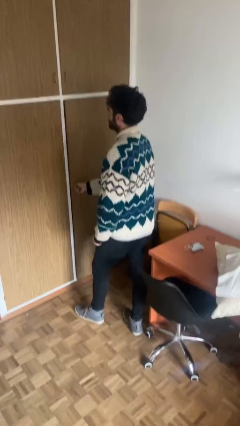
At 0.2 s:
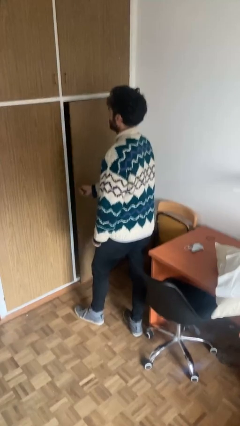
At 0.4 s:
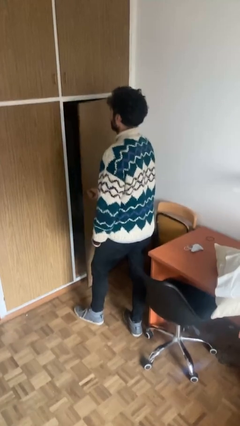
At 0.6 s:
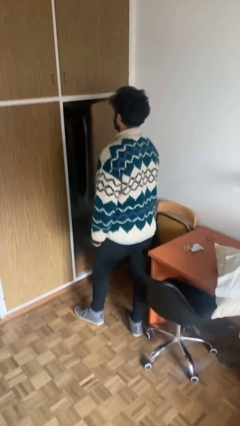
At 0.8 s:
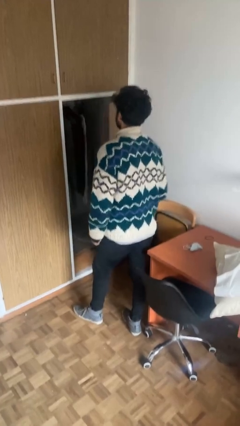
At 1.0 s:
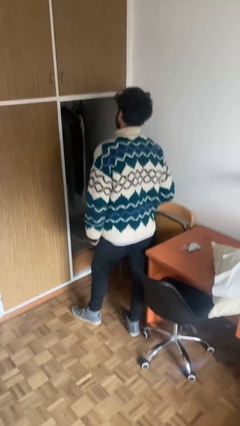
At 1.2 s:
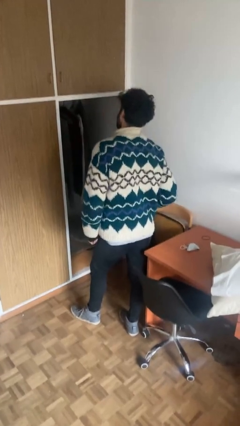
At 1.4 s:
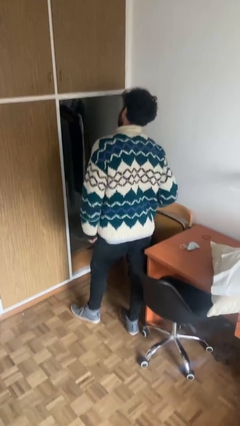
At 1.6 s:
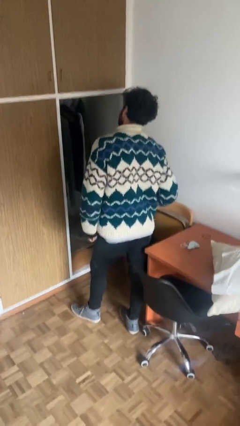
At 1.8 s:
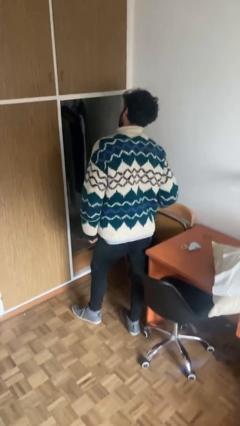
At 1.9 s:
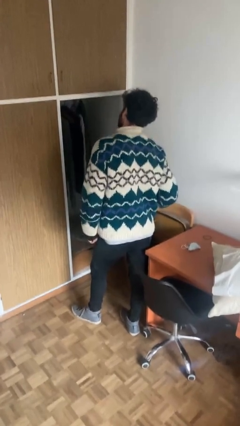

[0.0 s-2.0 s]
person opens closet door

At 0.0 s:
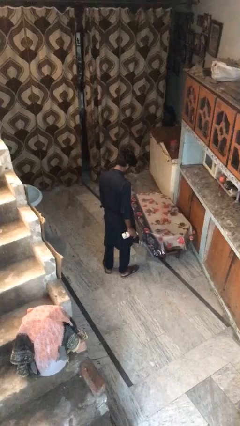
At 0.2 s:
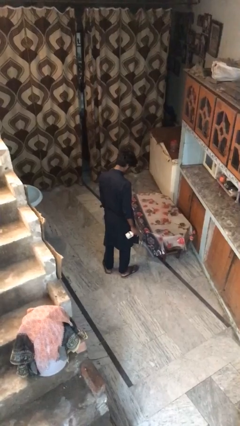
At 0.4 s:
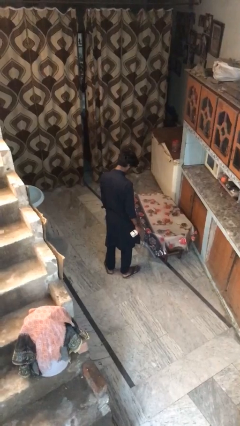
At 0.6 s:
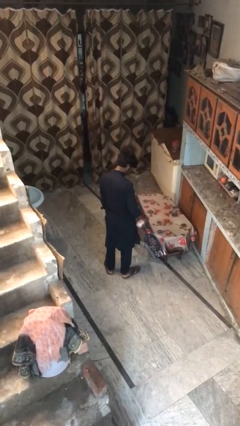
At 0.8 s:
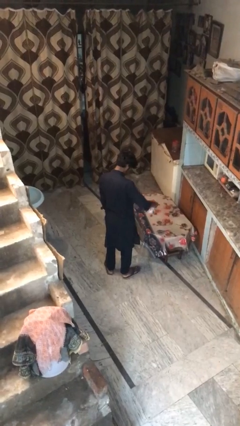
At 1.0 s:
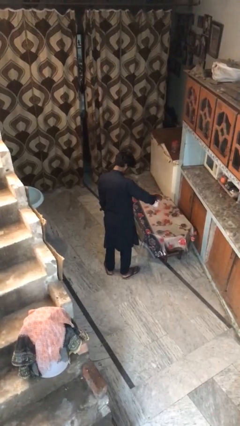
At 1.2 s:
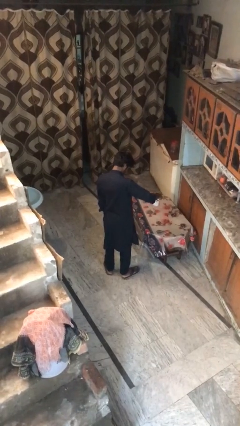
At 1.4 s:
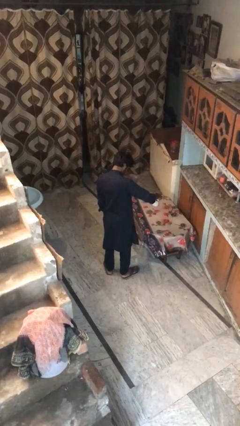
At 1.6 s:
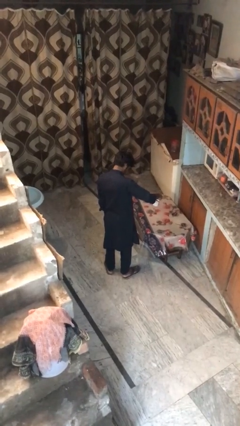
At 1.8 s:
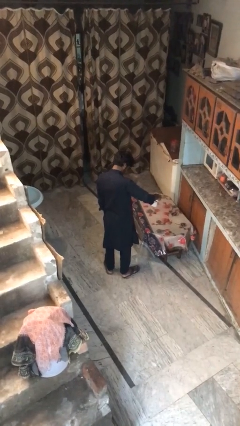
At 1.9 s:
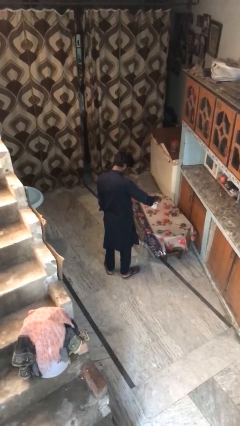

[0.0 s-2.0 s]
person sprays from bottle

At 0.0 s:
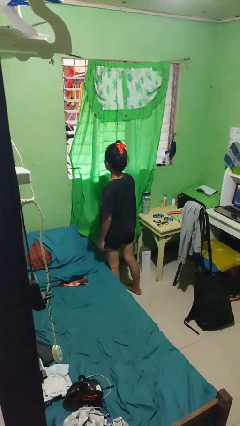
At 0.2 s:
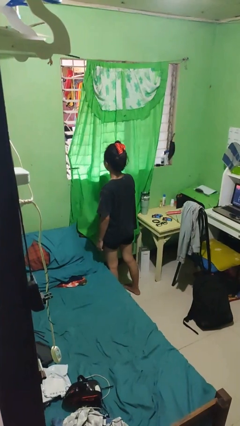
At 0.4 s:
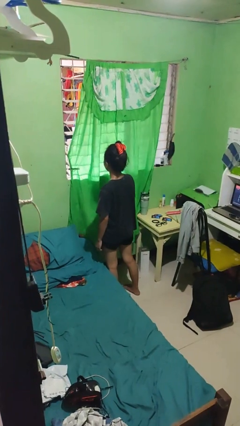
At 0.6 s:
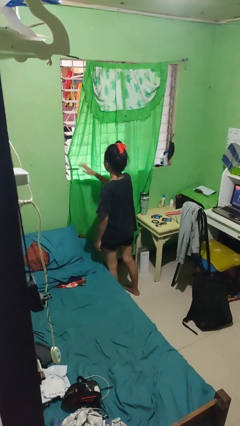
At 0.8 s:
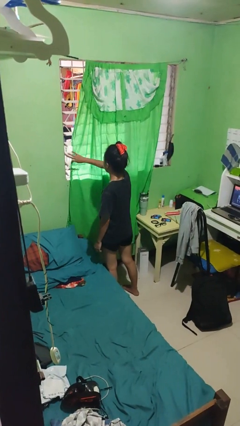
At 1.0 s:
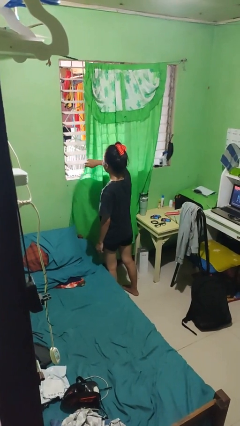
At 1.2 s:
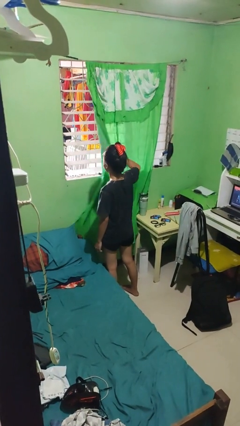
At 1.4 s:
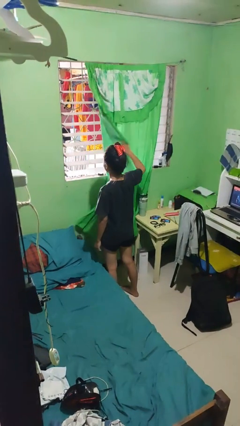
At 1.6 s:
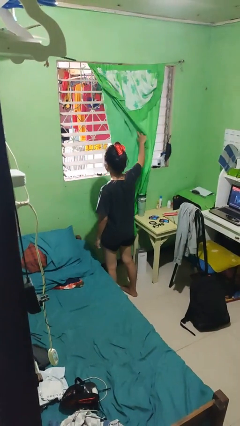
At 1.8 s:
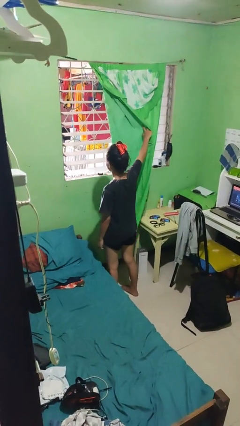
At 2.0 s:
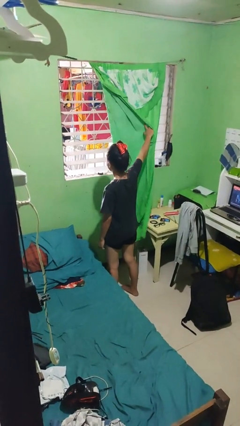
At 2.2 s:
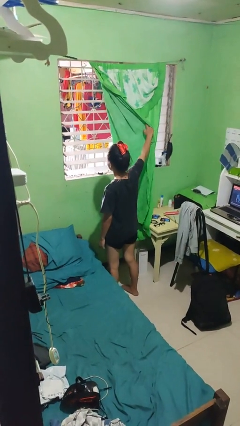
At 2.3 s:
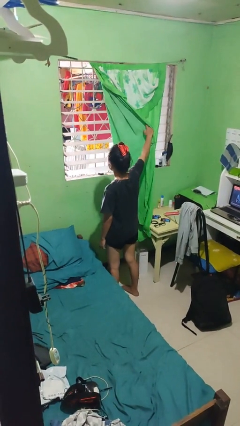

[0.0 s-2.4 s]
person opens curtains

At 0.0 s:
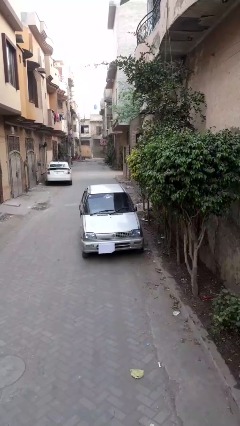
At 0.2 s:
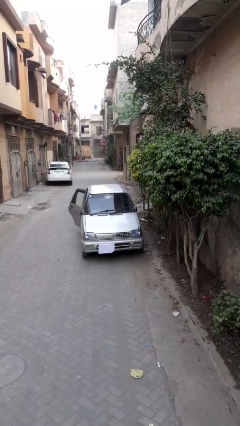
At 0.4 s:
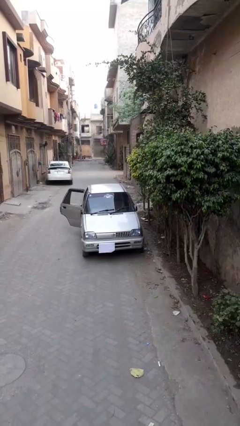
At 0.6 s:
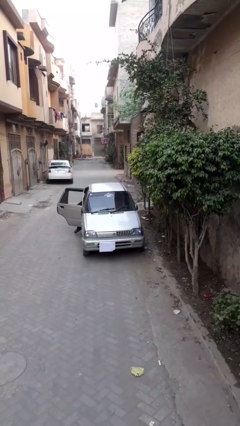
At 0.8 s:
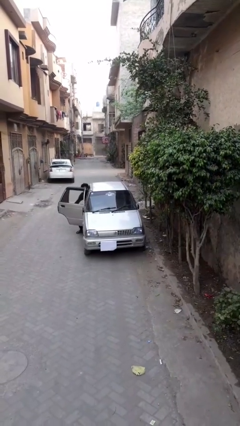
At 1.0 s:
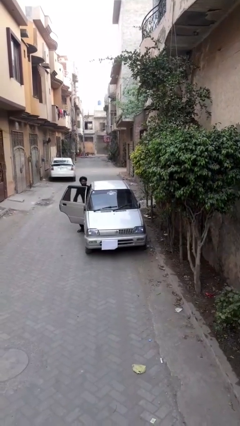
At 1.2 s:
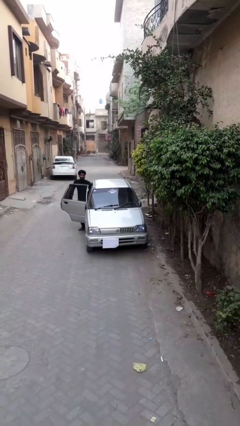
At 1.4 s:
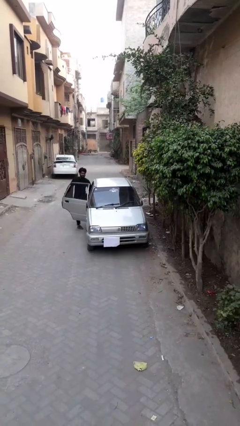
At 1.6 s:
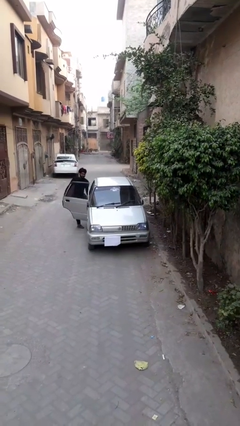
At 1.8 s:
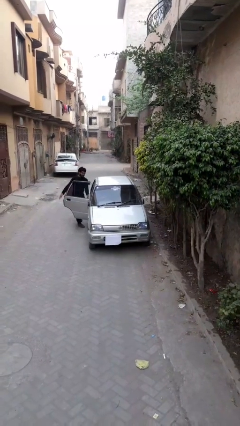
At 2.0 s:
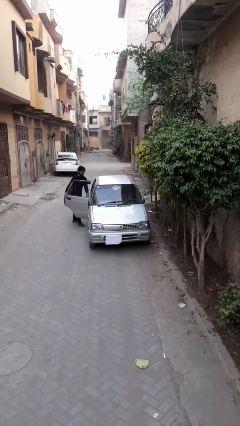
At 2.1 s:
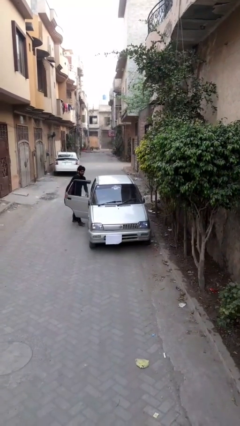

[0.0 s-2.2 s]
car drops off person

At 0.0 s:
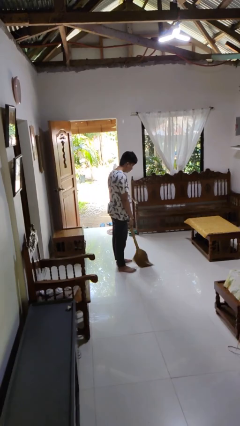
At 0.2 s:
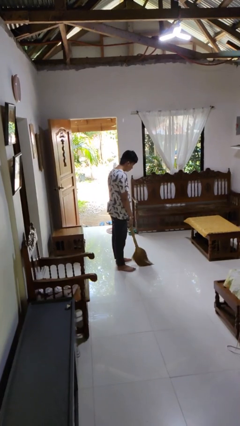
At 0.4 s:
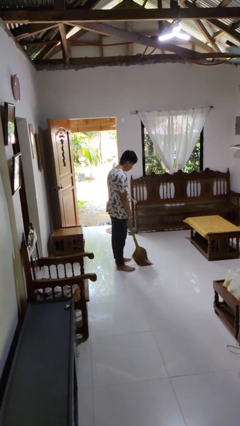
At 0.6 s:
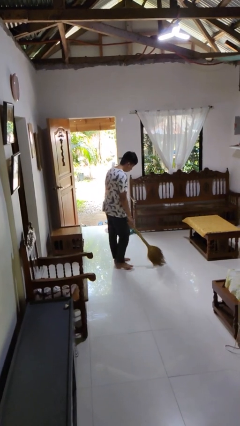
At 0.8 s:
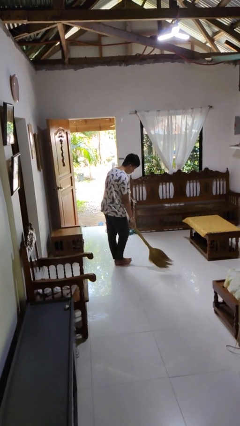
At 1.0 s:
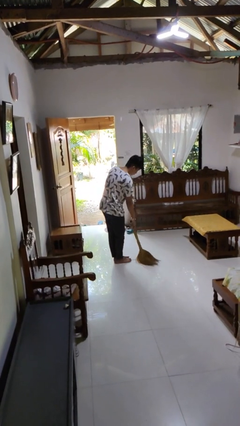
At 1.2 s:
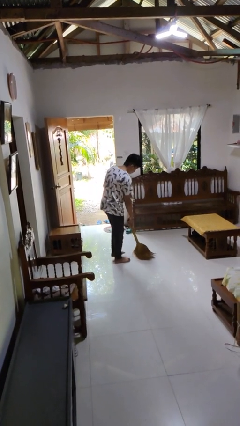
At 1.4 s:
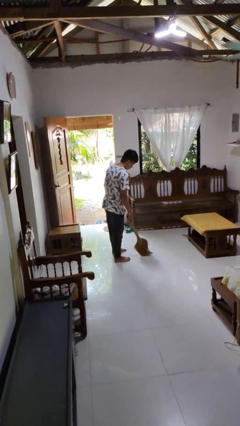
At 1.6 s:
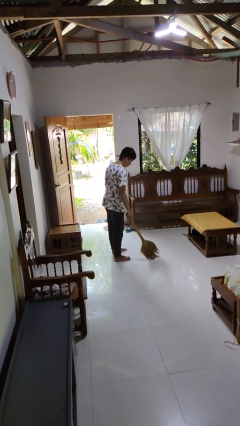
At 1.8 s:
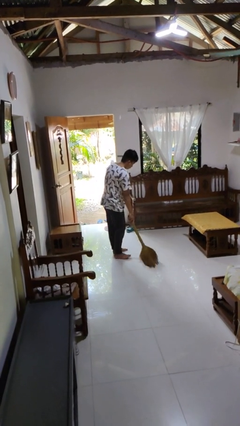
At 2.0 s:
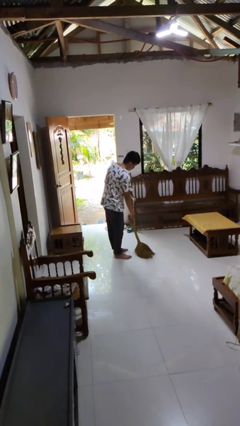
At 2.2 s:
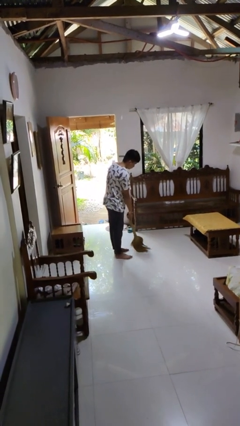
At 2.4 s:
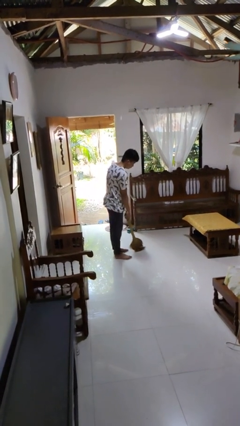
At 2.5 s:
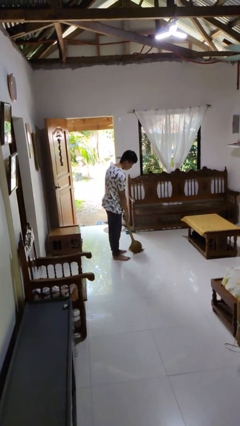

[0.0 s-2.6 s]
person sweeps floor

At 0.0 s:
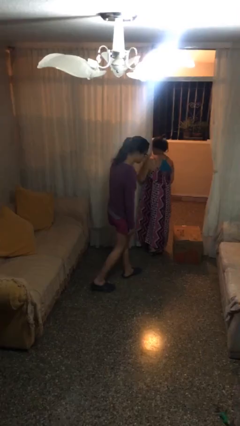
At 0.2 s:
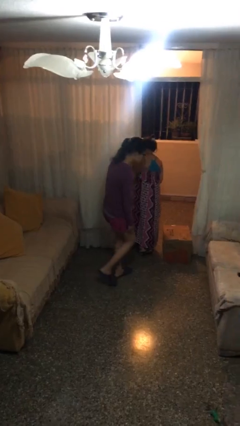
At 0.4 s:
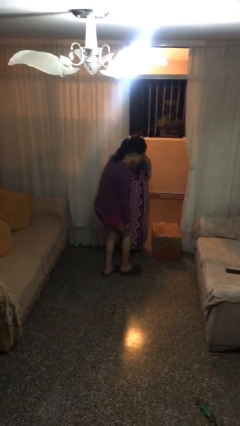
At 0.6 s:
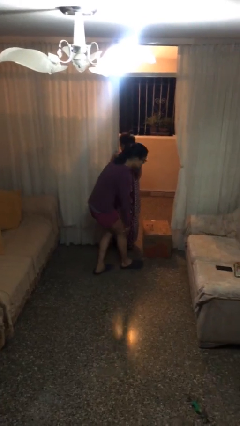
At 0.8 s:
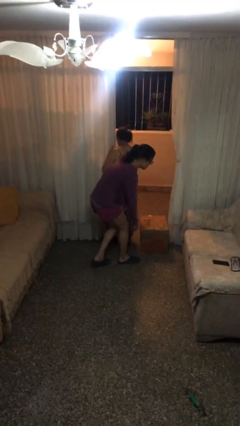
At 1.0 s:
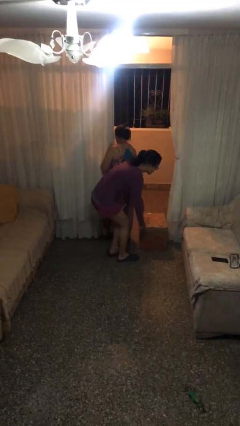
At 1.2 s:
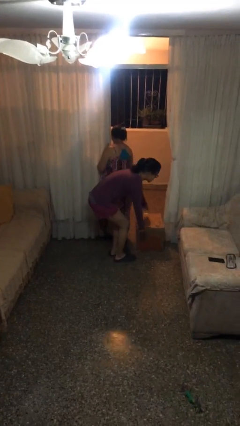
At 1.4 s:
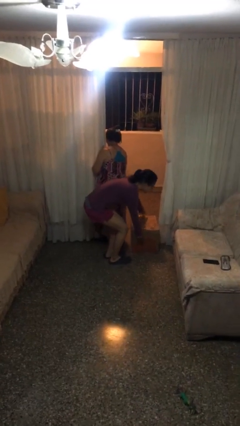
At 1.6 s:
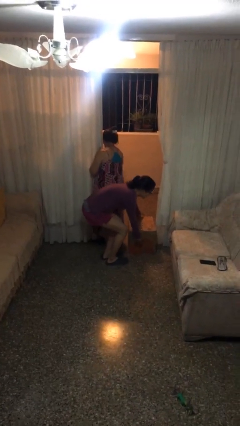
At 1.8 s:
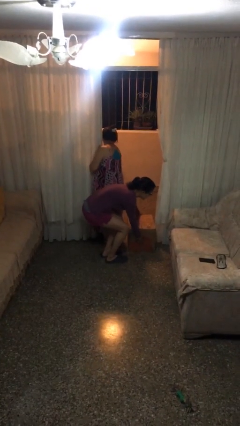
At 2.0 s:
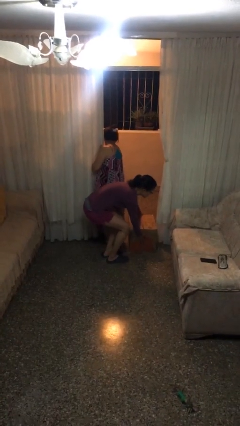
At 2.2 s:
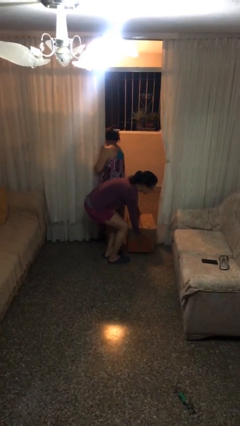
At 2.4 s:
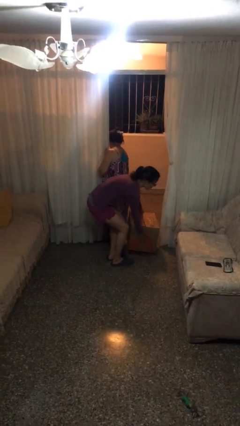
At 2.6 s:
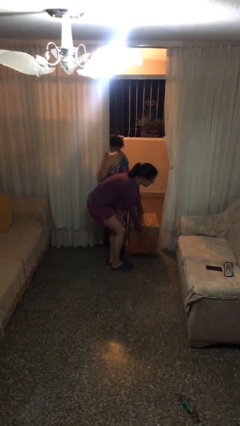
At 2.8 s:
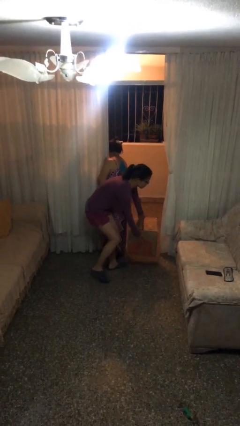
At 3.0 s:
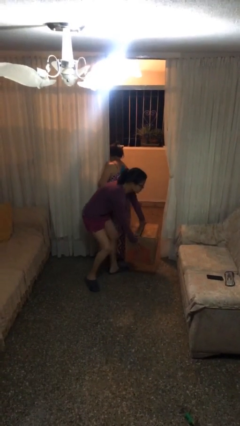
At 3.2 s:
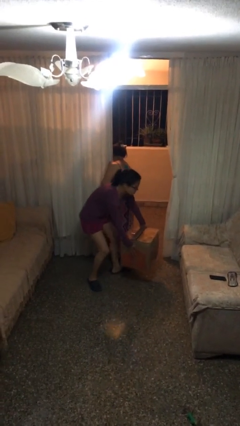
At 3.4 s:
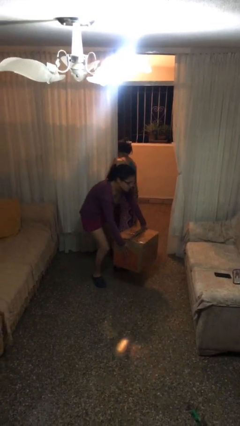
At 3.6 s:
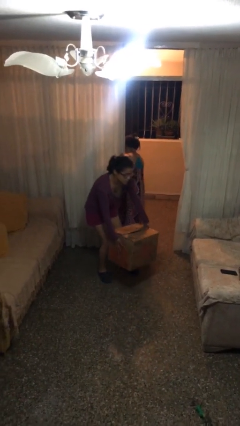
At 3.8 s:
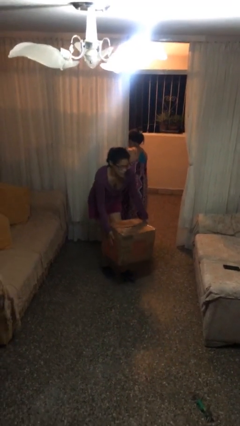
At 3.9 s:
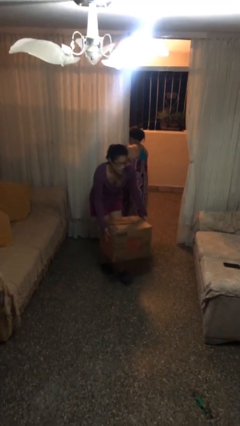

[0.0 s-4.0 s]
person steals object from person

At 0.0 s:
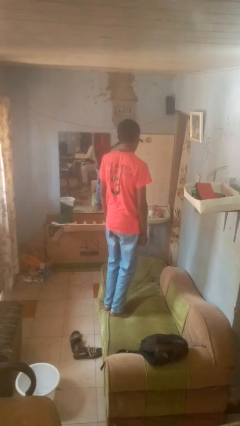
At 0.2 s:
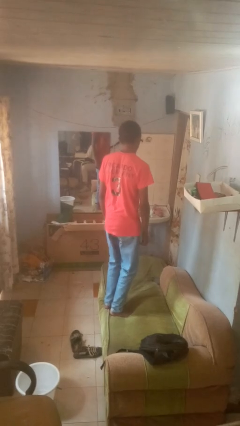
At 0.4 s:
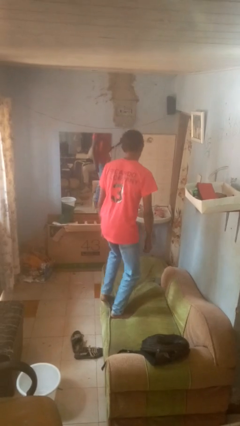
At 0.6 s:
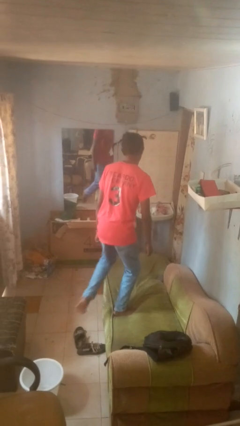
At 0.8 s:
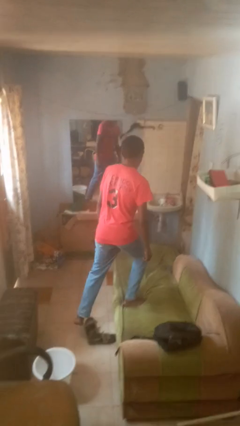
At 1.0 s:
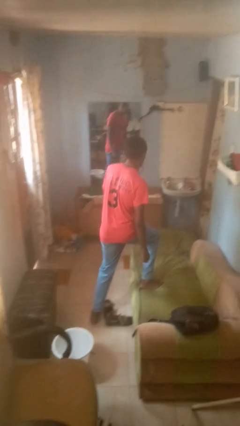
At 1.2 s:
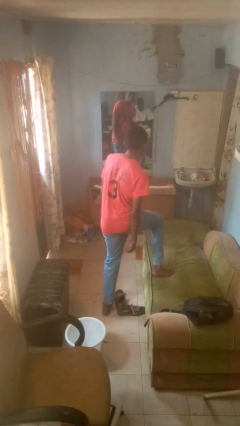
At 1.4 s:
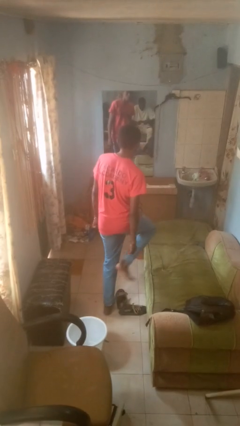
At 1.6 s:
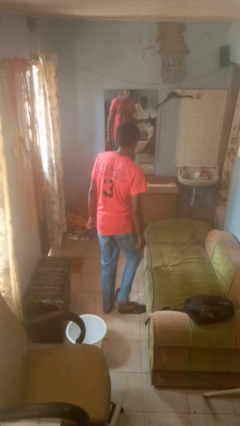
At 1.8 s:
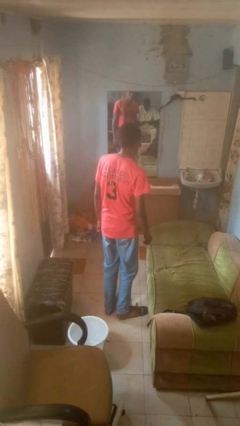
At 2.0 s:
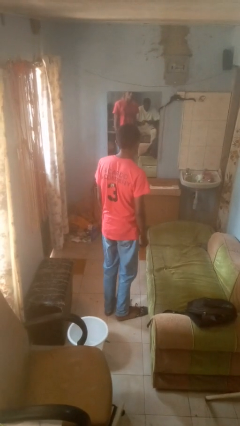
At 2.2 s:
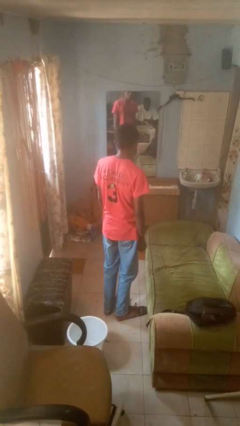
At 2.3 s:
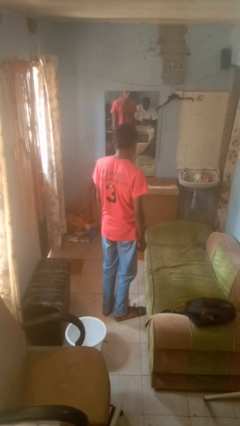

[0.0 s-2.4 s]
person climbs off couch
